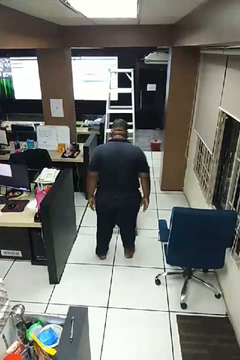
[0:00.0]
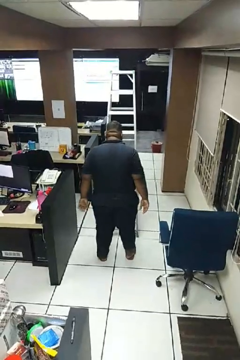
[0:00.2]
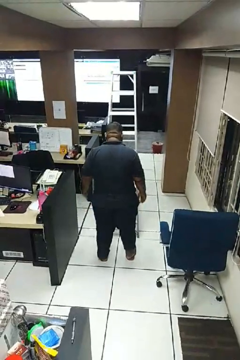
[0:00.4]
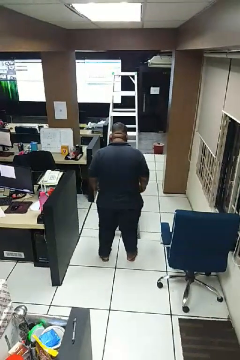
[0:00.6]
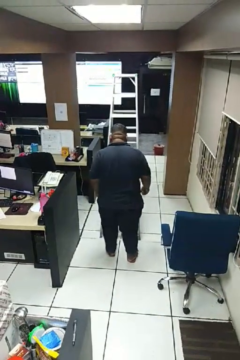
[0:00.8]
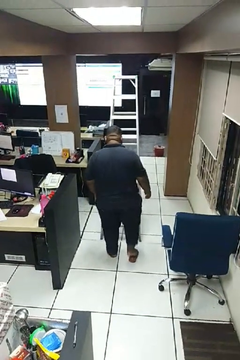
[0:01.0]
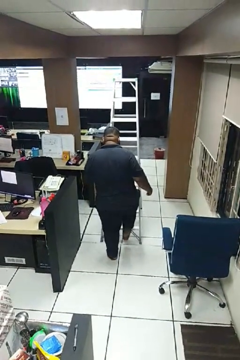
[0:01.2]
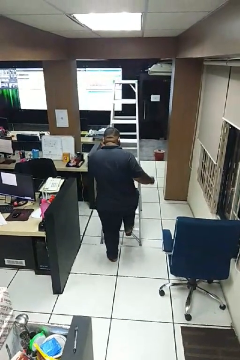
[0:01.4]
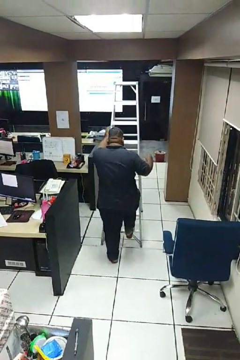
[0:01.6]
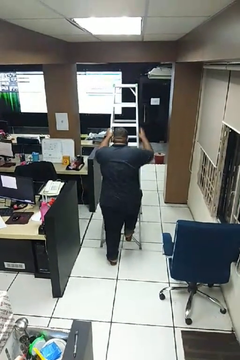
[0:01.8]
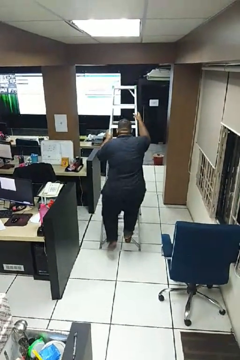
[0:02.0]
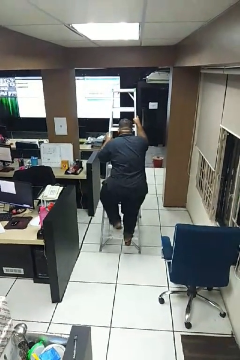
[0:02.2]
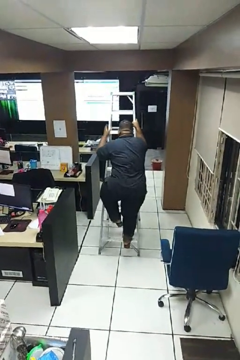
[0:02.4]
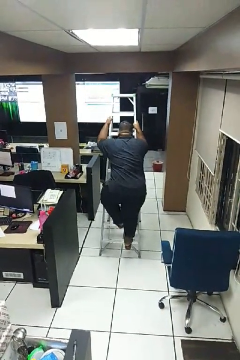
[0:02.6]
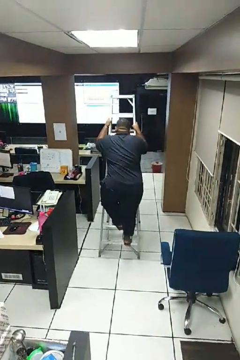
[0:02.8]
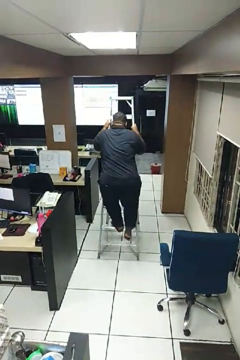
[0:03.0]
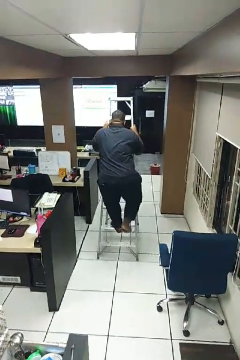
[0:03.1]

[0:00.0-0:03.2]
person climbs up ladder

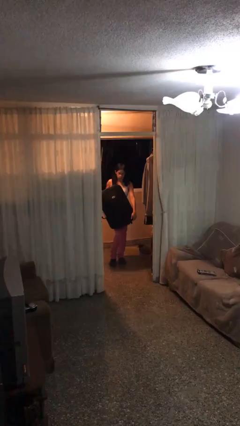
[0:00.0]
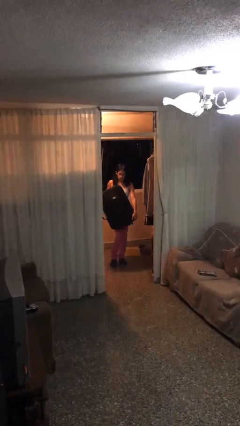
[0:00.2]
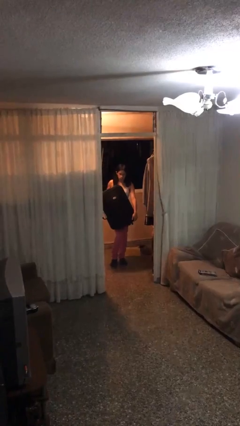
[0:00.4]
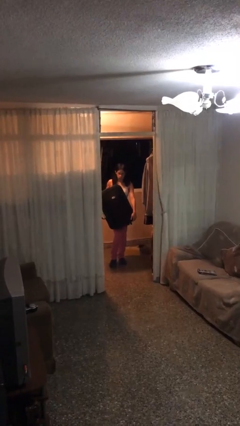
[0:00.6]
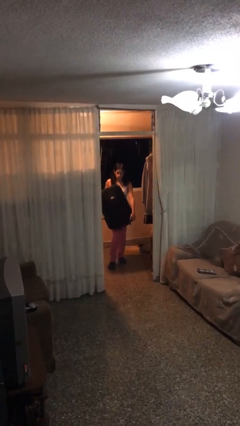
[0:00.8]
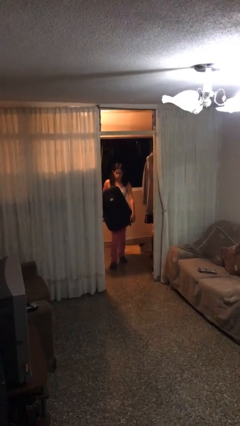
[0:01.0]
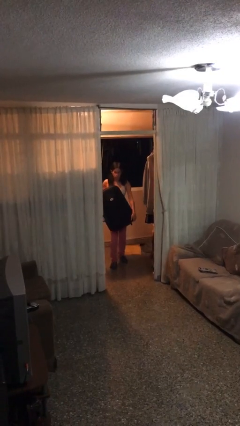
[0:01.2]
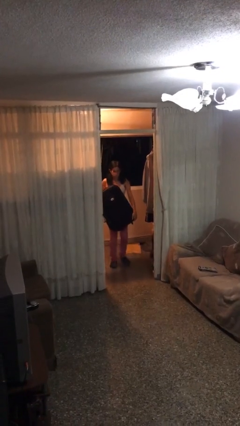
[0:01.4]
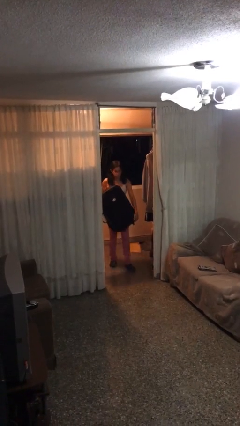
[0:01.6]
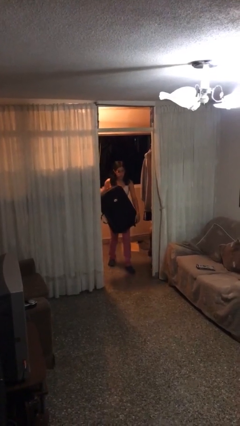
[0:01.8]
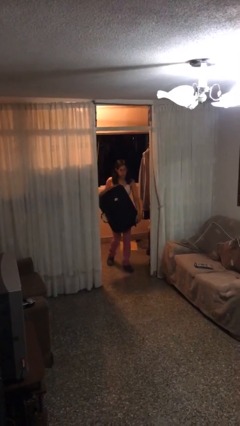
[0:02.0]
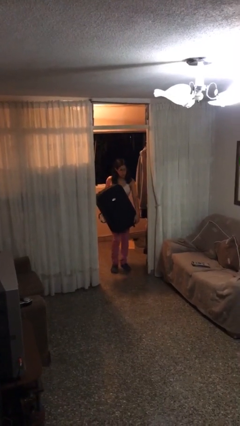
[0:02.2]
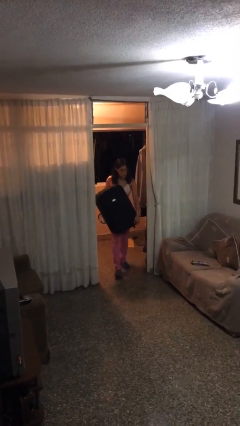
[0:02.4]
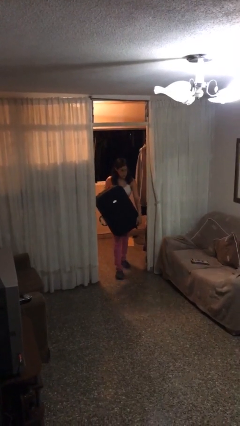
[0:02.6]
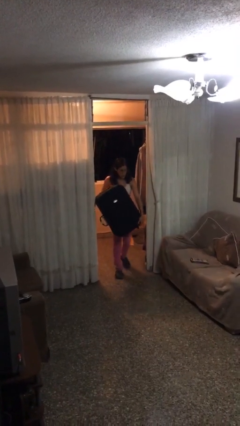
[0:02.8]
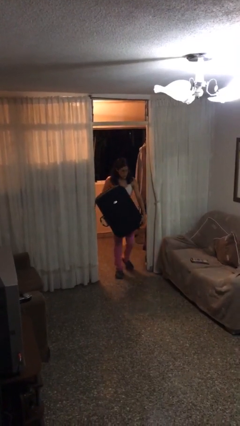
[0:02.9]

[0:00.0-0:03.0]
person carries heavy object

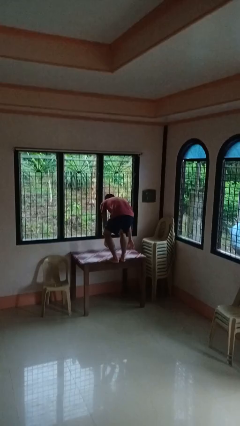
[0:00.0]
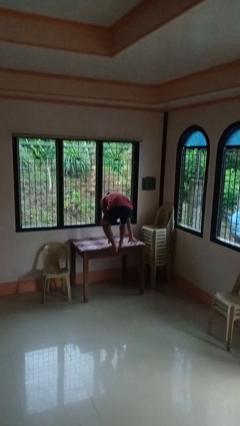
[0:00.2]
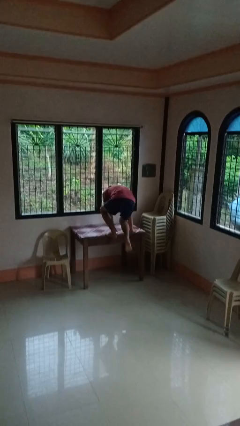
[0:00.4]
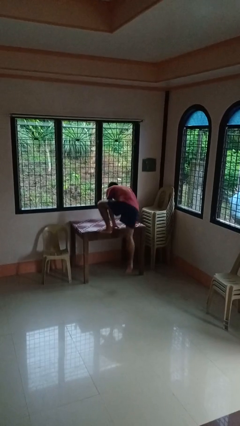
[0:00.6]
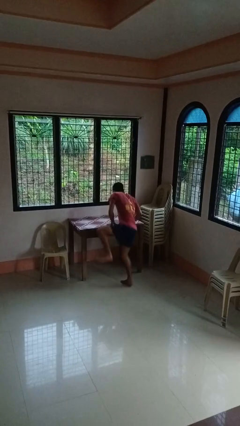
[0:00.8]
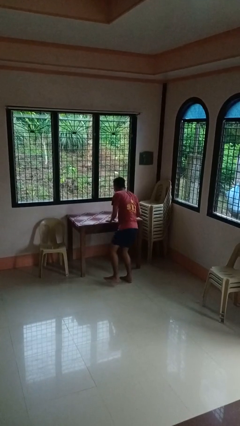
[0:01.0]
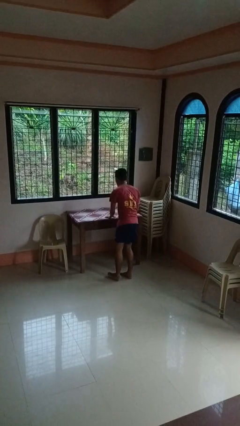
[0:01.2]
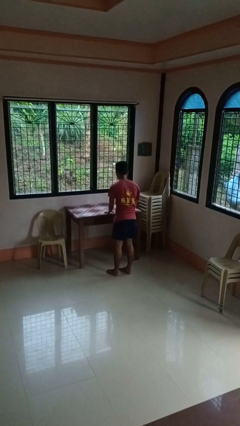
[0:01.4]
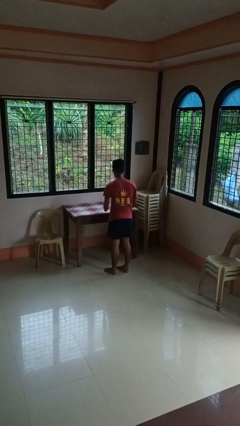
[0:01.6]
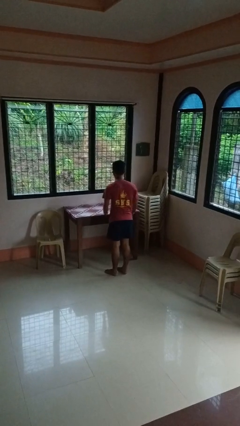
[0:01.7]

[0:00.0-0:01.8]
person climbs off table

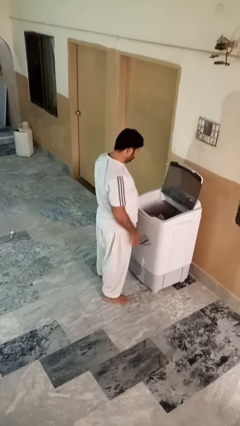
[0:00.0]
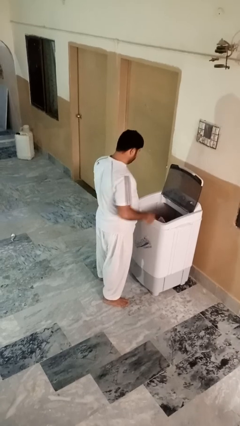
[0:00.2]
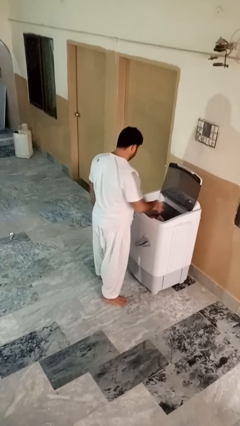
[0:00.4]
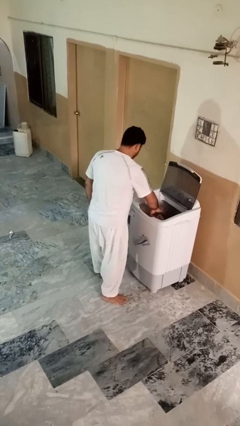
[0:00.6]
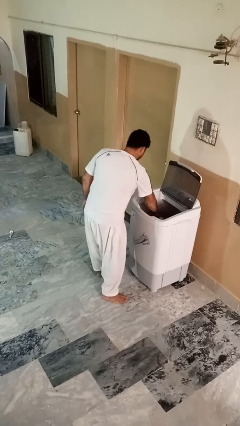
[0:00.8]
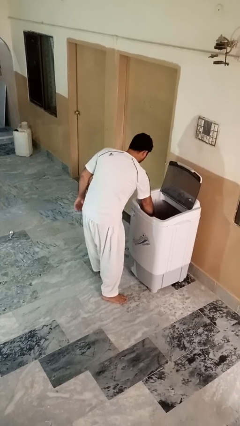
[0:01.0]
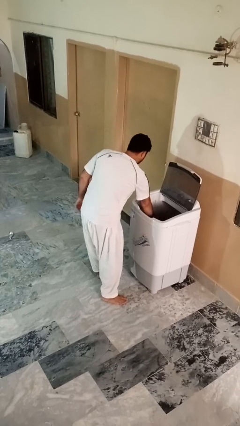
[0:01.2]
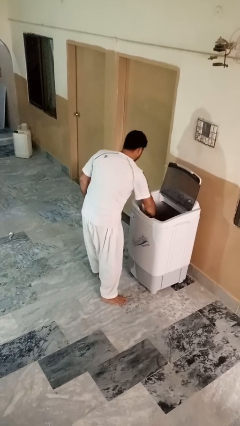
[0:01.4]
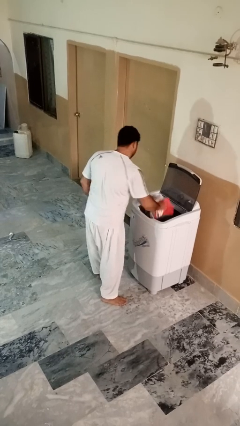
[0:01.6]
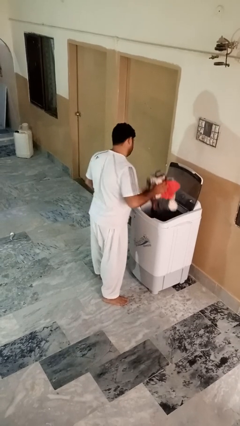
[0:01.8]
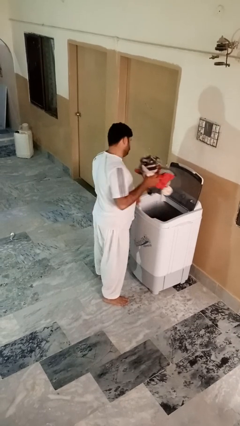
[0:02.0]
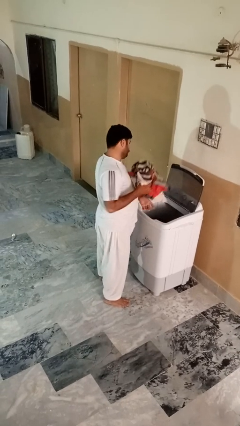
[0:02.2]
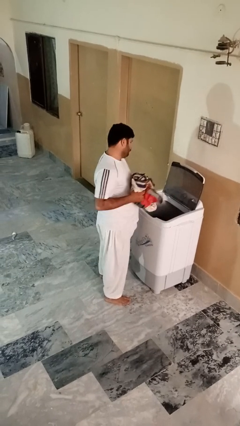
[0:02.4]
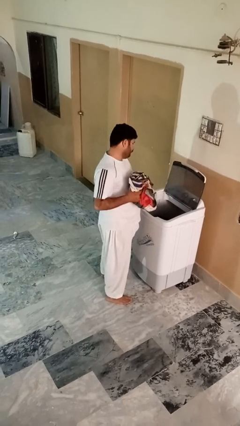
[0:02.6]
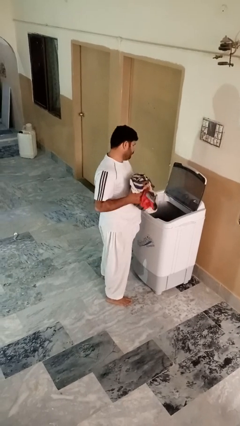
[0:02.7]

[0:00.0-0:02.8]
person unloads clotheswasher

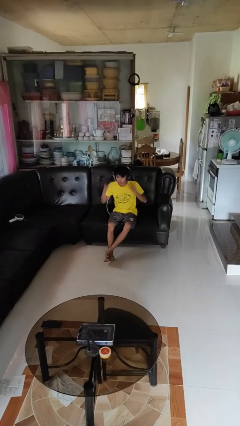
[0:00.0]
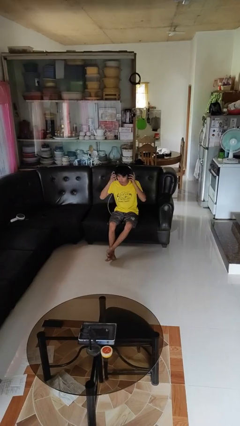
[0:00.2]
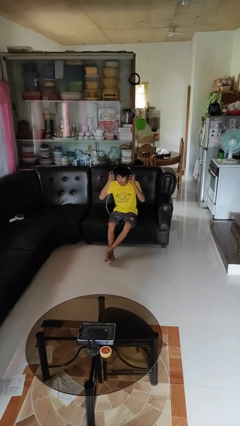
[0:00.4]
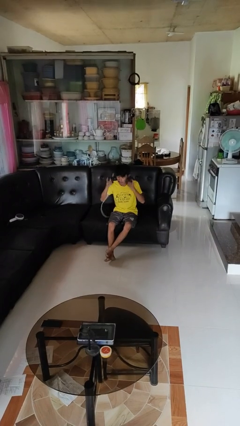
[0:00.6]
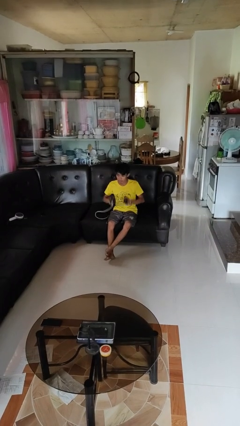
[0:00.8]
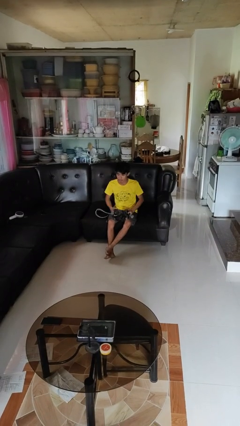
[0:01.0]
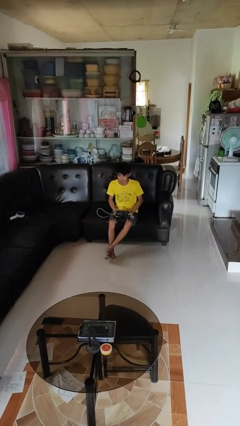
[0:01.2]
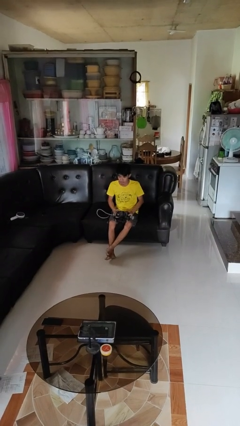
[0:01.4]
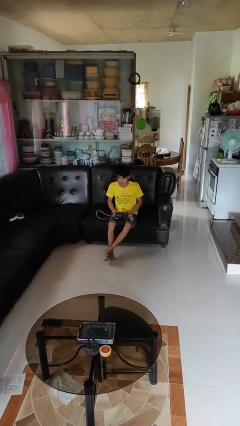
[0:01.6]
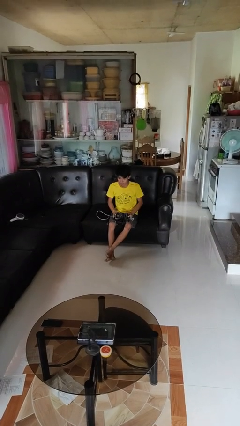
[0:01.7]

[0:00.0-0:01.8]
person takes off headphones

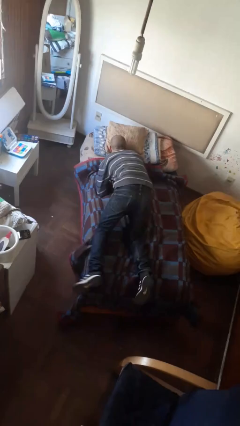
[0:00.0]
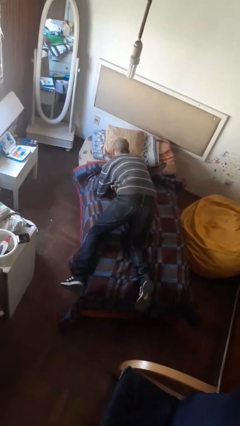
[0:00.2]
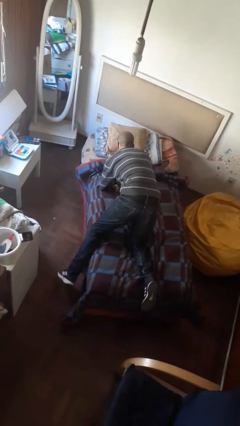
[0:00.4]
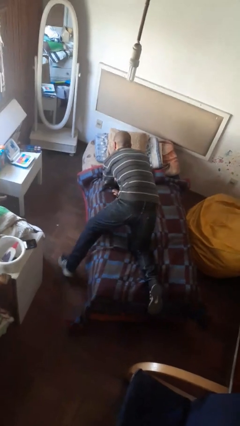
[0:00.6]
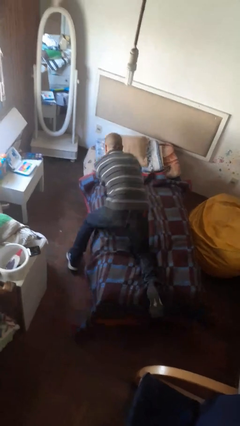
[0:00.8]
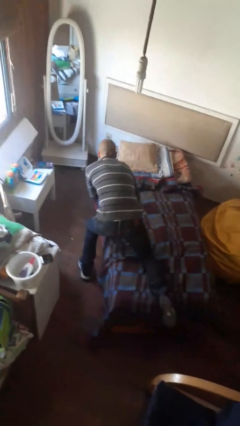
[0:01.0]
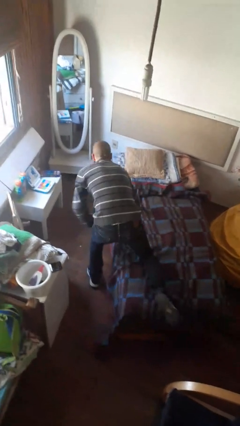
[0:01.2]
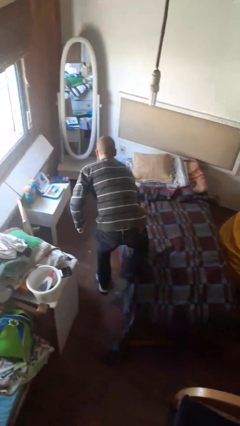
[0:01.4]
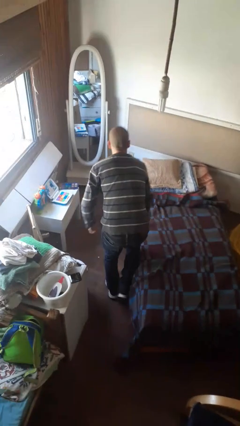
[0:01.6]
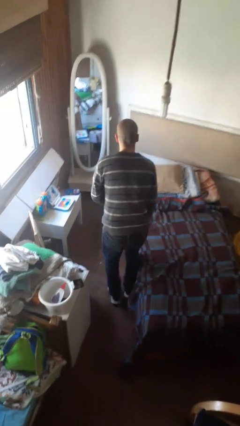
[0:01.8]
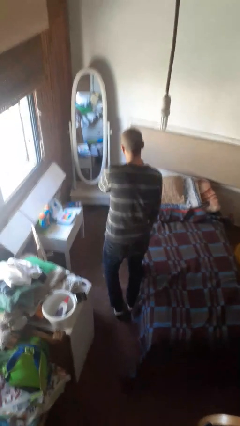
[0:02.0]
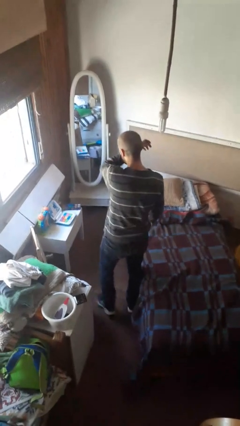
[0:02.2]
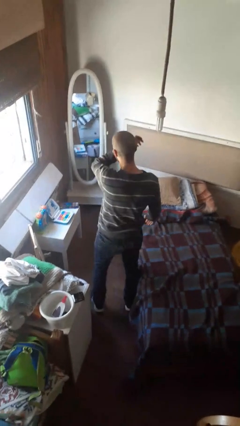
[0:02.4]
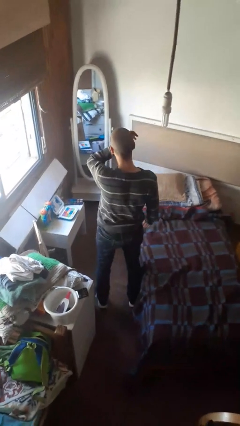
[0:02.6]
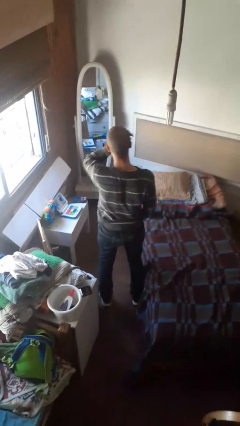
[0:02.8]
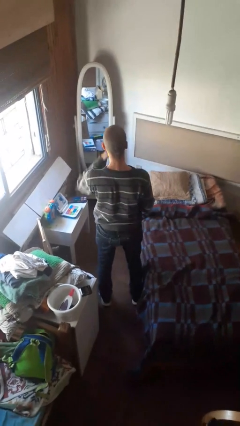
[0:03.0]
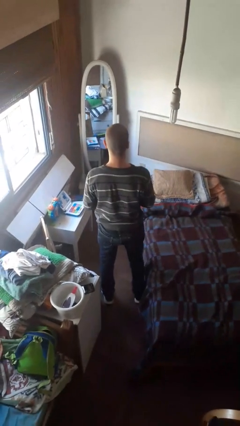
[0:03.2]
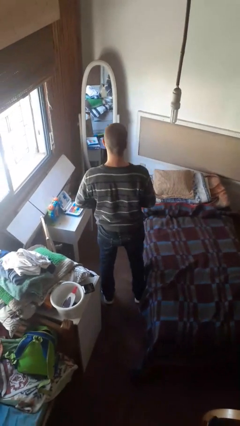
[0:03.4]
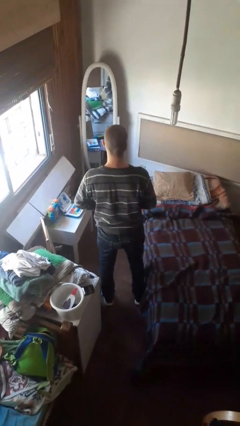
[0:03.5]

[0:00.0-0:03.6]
person stands up

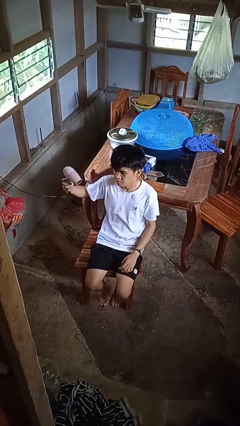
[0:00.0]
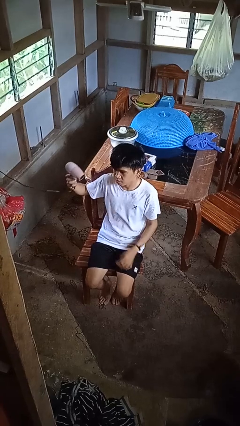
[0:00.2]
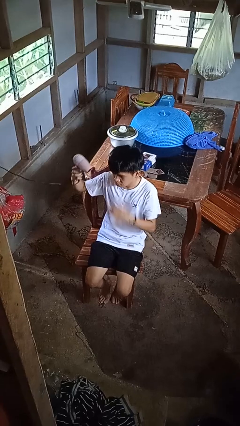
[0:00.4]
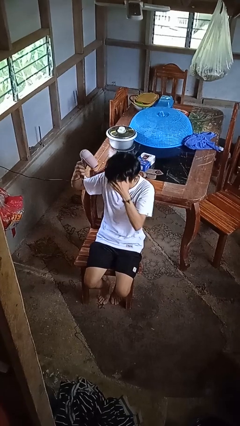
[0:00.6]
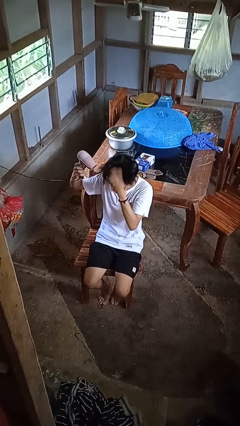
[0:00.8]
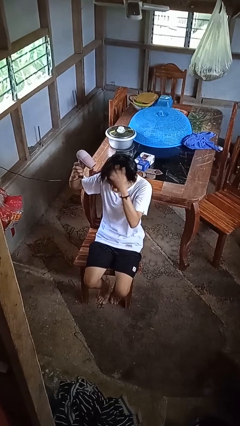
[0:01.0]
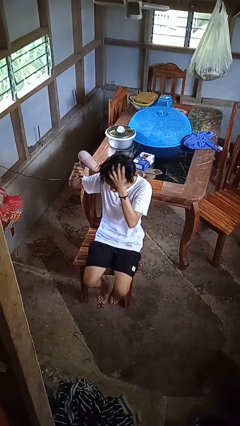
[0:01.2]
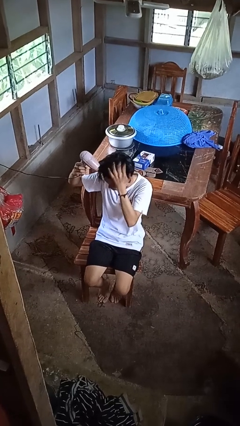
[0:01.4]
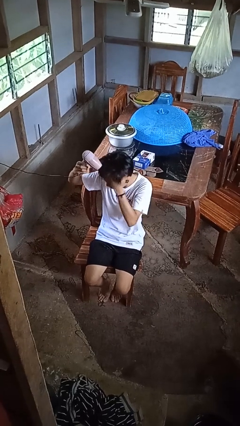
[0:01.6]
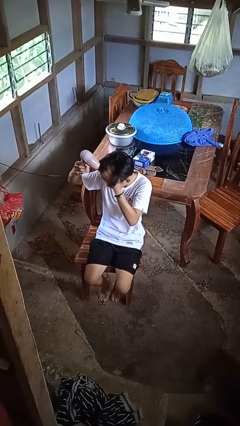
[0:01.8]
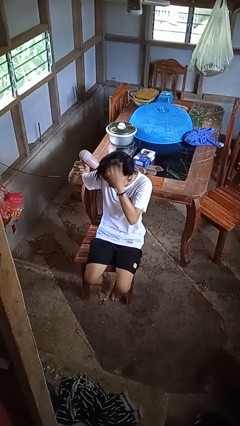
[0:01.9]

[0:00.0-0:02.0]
person dries hair with hairdryer
